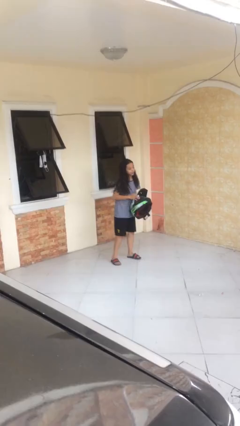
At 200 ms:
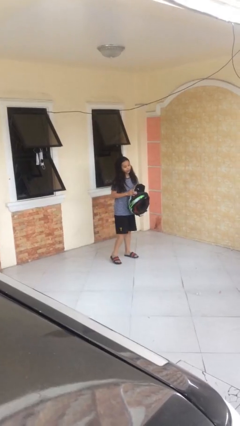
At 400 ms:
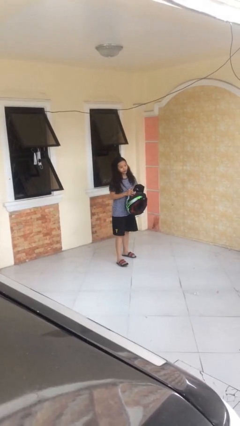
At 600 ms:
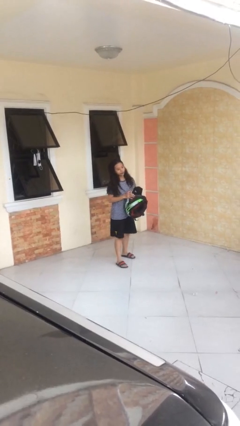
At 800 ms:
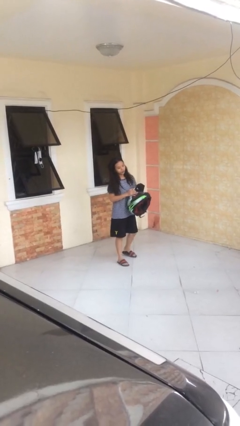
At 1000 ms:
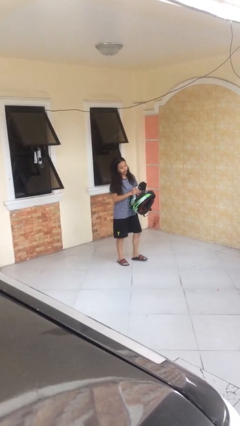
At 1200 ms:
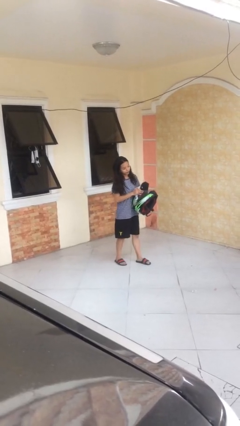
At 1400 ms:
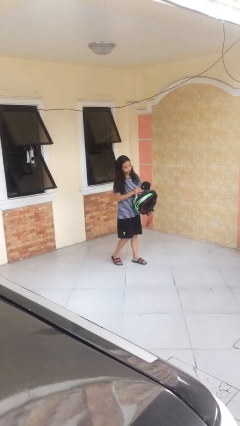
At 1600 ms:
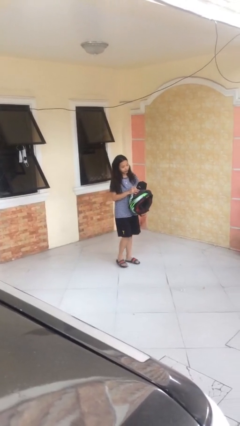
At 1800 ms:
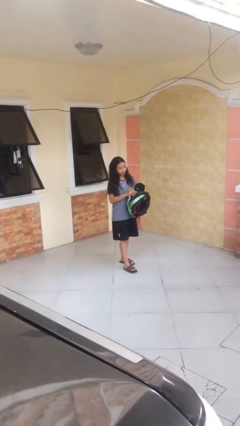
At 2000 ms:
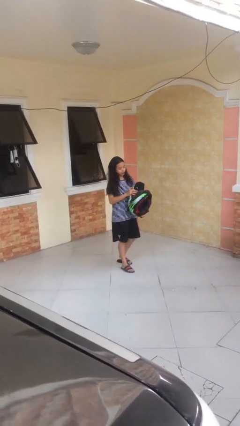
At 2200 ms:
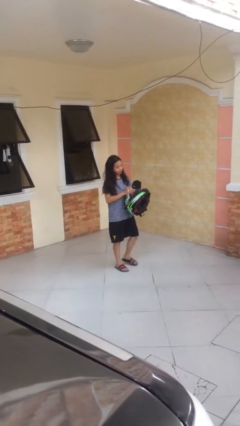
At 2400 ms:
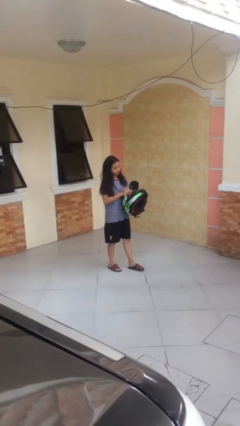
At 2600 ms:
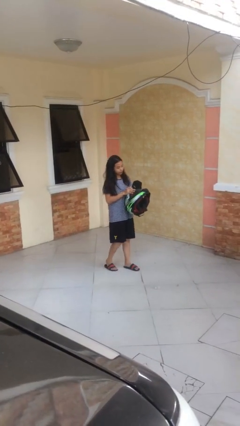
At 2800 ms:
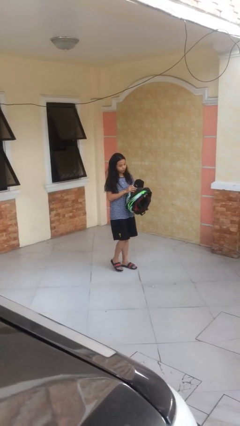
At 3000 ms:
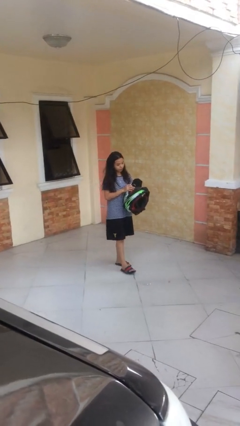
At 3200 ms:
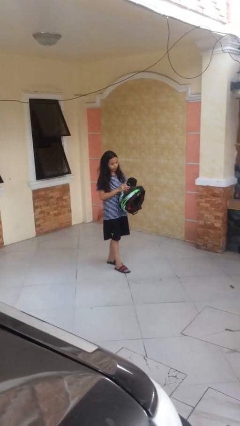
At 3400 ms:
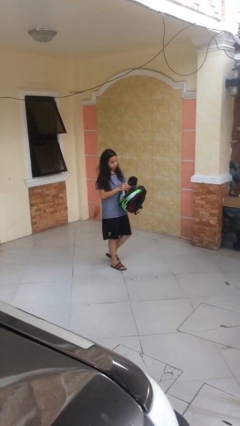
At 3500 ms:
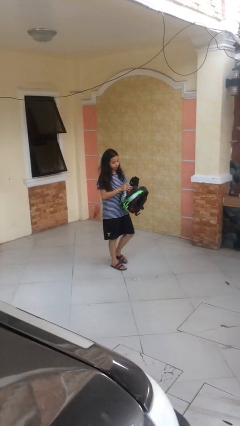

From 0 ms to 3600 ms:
person carries heavy object

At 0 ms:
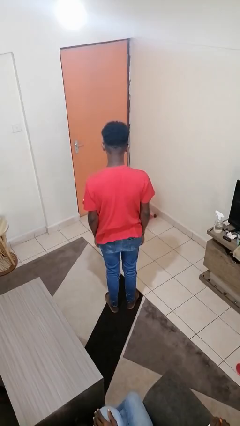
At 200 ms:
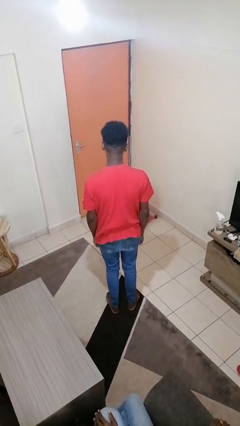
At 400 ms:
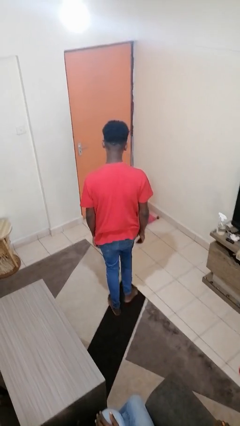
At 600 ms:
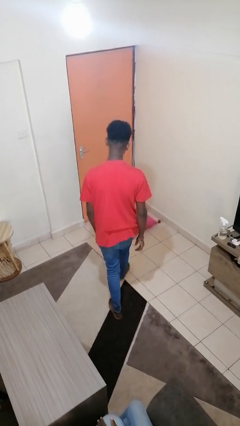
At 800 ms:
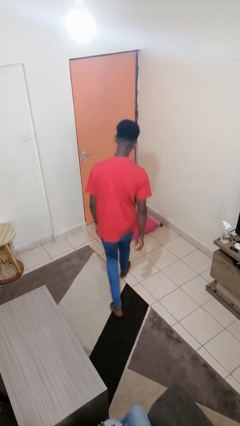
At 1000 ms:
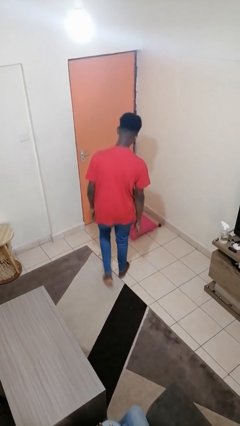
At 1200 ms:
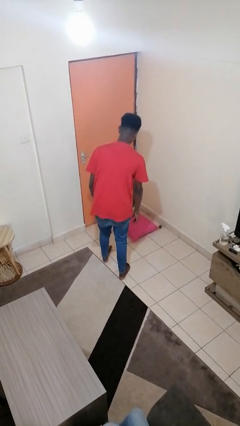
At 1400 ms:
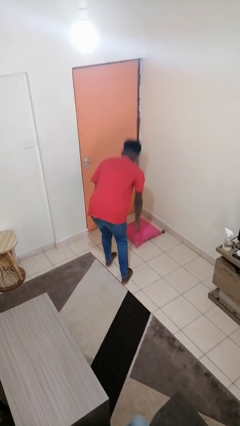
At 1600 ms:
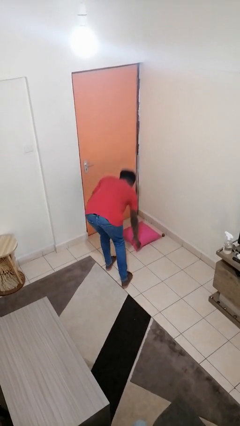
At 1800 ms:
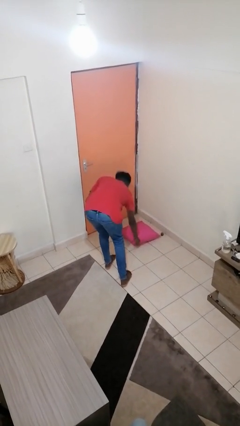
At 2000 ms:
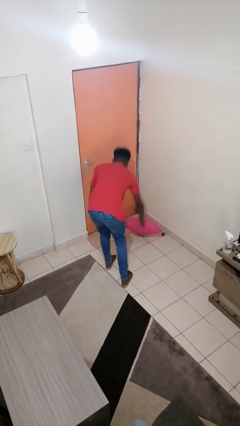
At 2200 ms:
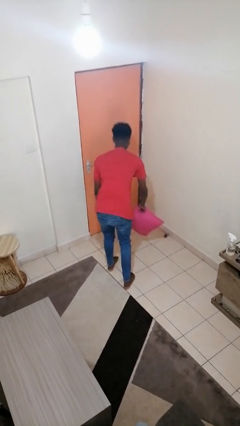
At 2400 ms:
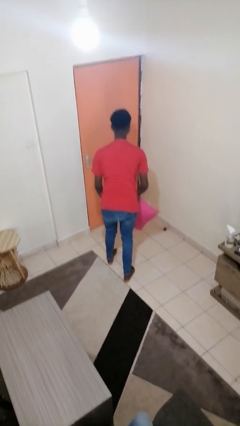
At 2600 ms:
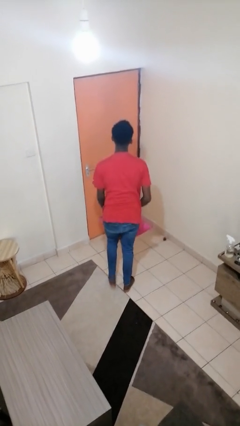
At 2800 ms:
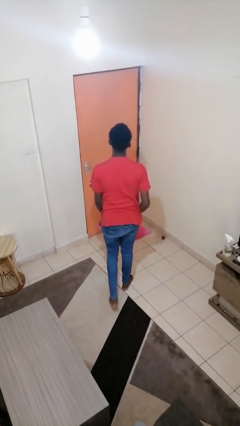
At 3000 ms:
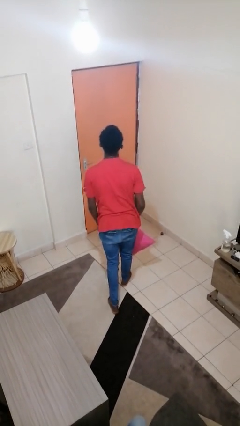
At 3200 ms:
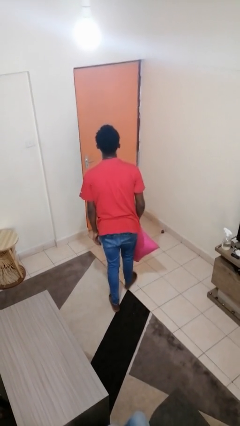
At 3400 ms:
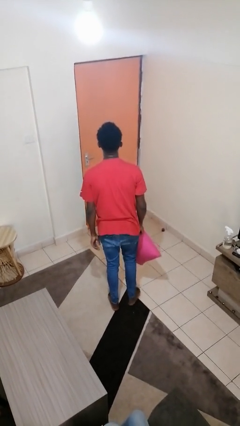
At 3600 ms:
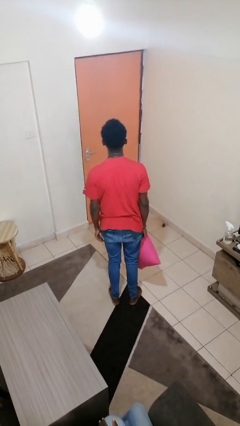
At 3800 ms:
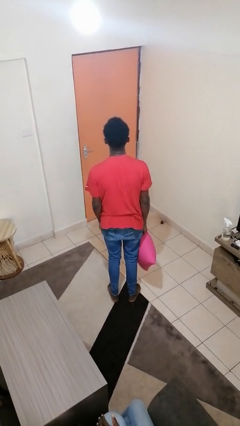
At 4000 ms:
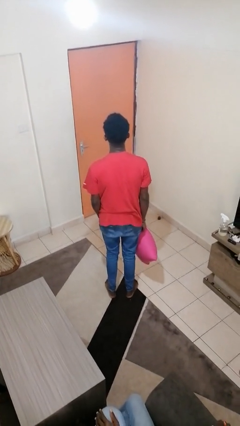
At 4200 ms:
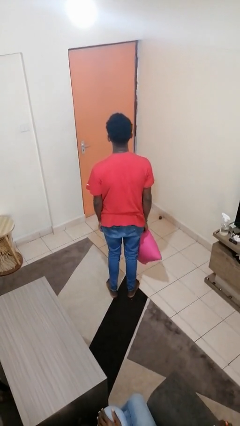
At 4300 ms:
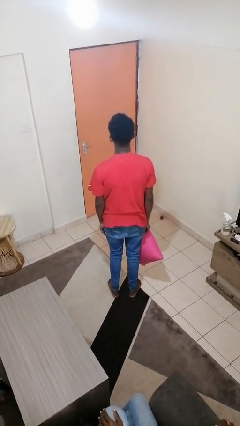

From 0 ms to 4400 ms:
person picks up object from floor

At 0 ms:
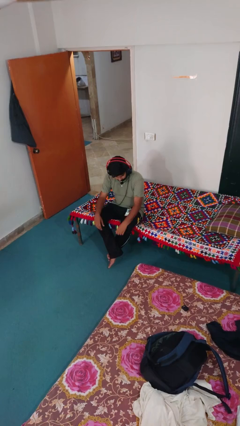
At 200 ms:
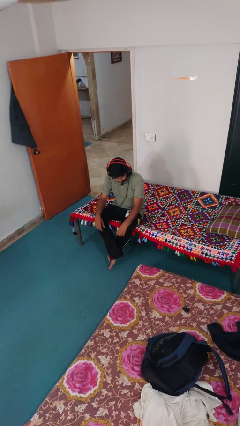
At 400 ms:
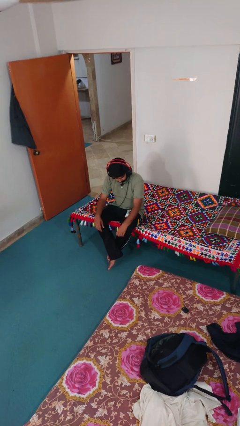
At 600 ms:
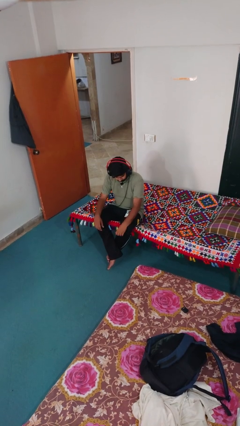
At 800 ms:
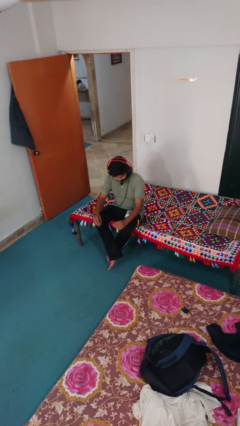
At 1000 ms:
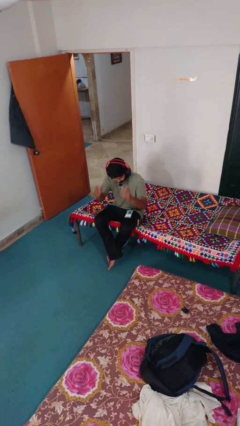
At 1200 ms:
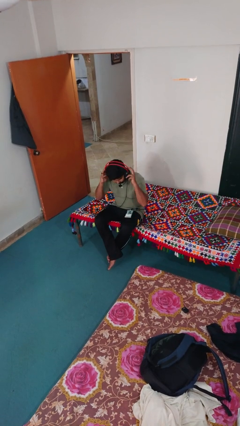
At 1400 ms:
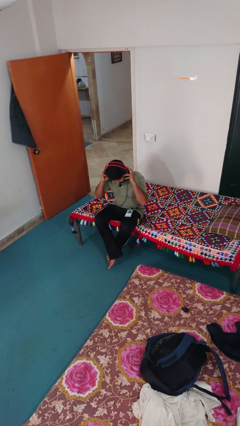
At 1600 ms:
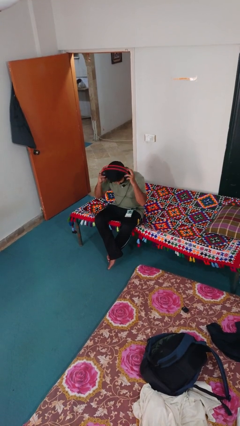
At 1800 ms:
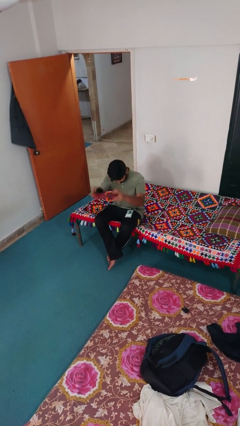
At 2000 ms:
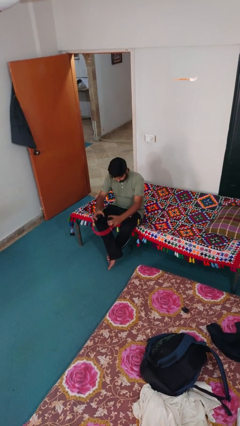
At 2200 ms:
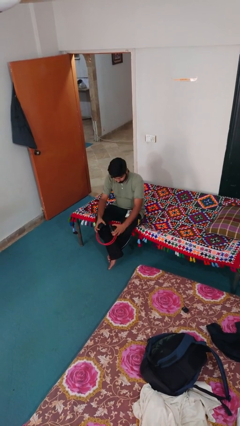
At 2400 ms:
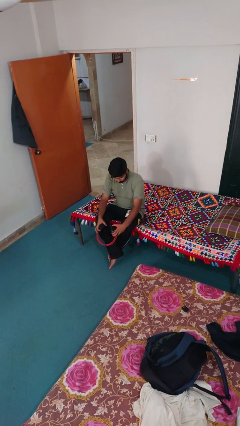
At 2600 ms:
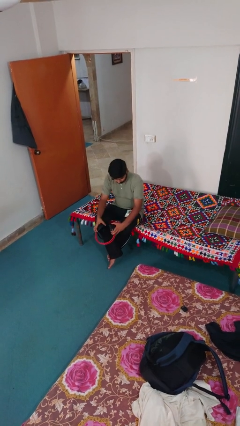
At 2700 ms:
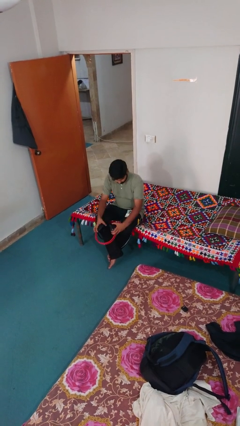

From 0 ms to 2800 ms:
person takes off headphones

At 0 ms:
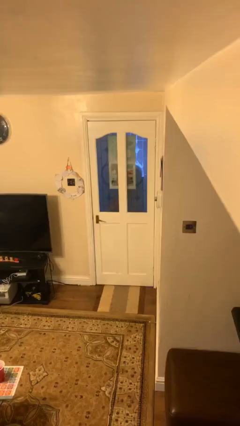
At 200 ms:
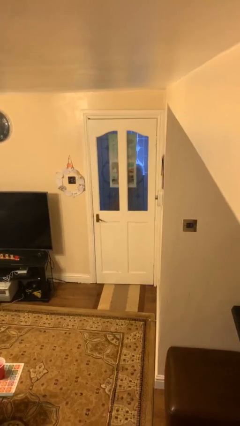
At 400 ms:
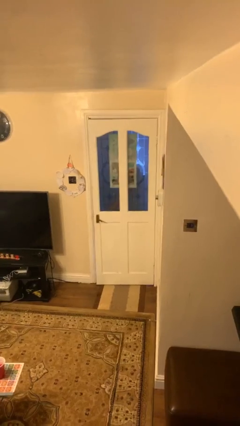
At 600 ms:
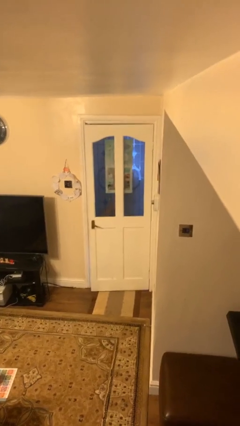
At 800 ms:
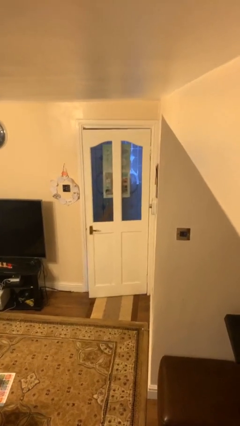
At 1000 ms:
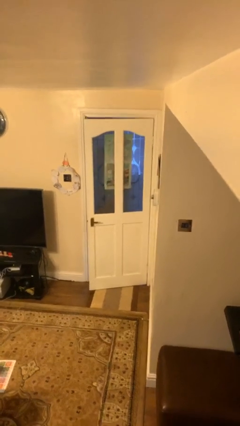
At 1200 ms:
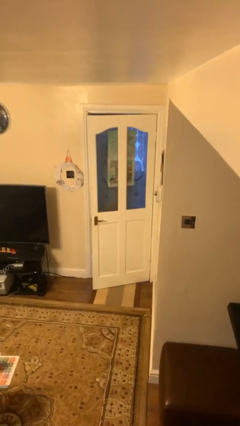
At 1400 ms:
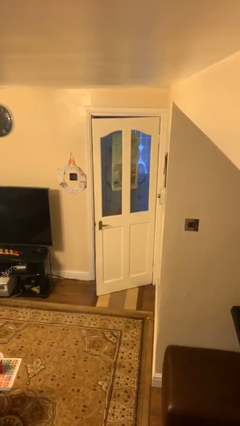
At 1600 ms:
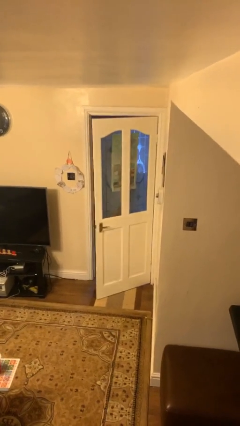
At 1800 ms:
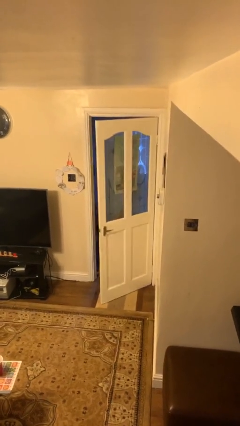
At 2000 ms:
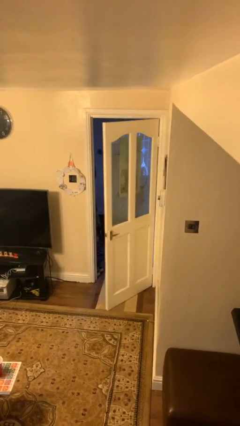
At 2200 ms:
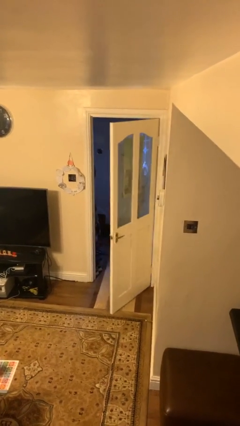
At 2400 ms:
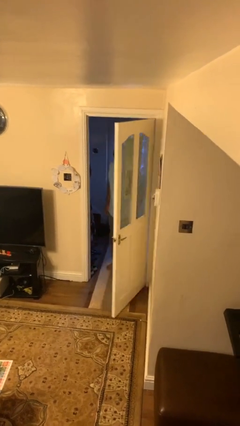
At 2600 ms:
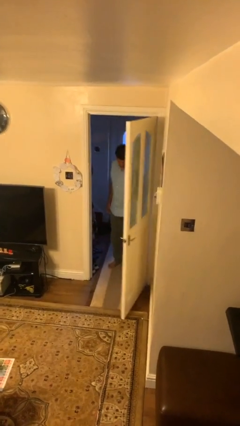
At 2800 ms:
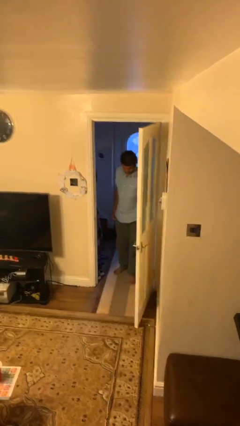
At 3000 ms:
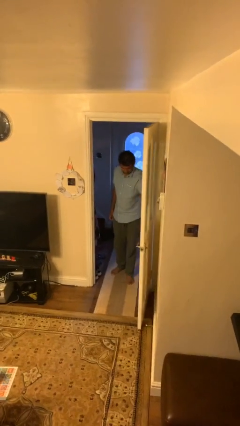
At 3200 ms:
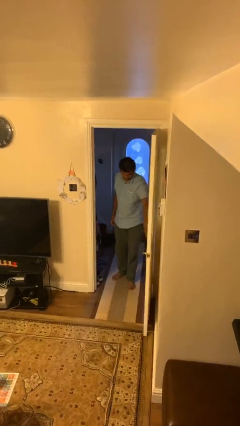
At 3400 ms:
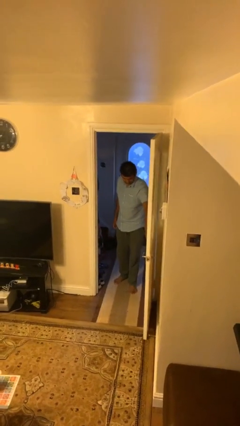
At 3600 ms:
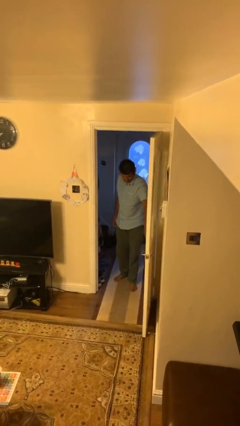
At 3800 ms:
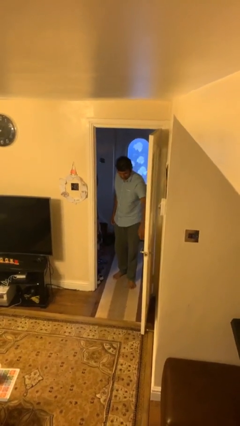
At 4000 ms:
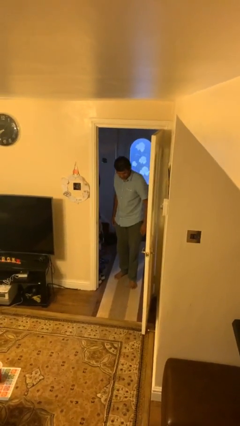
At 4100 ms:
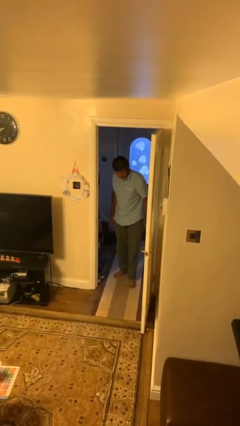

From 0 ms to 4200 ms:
person opens facility door

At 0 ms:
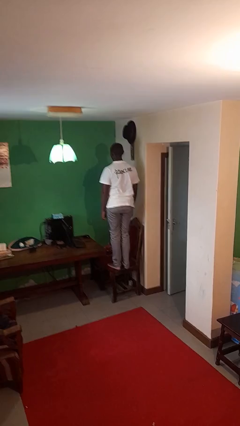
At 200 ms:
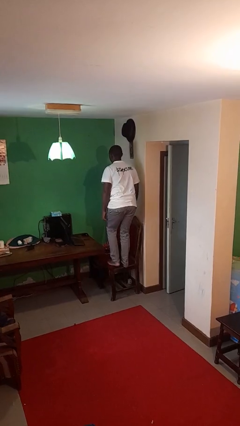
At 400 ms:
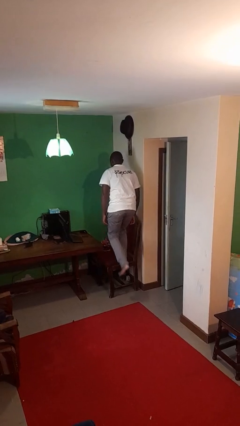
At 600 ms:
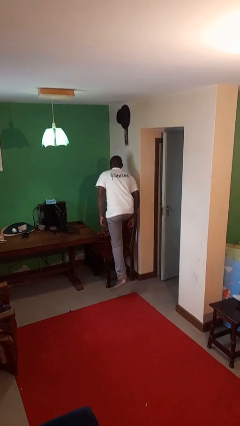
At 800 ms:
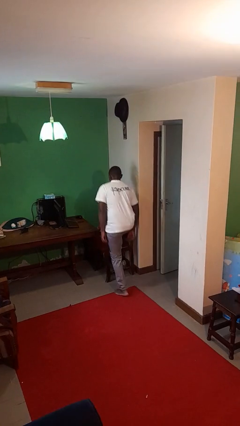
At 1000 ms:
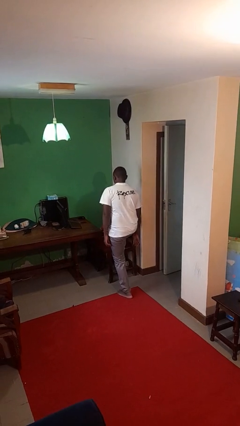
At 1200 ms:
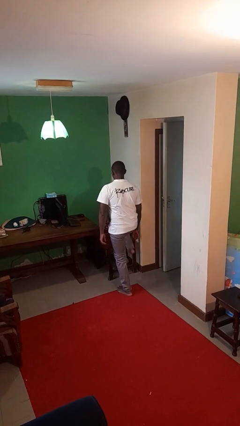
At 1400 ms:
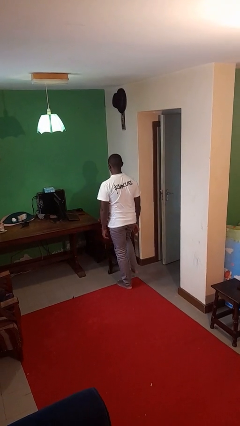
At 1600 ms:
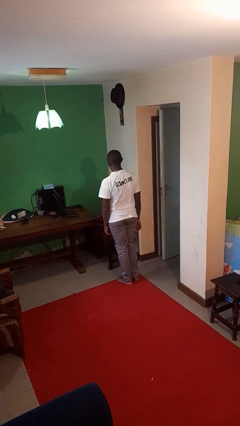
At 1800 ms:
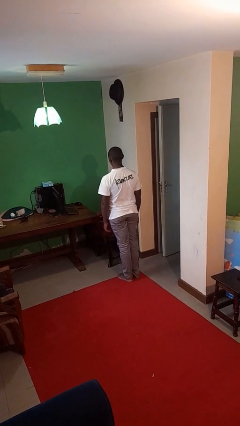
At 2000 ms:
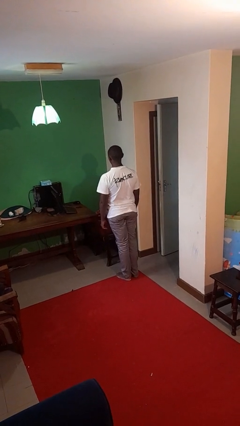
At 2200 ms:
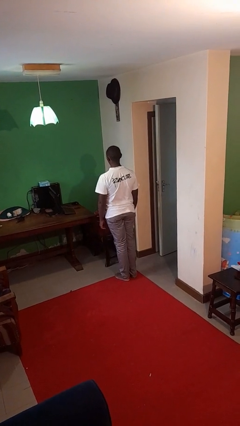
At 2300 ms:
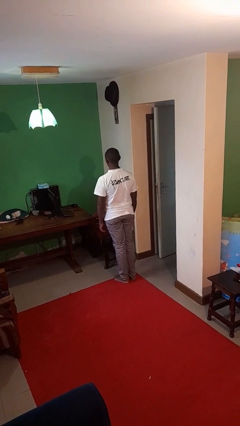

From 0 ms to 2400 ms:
person climbs off chair

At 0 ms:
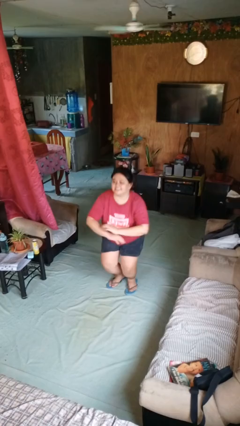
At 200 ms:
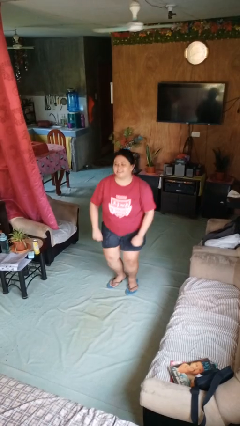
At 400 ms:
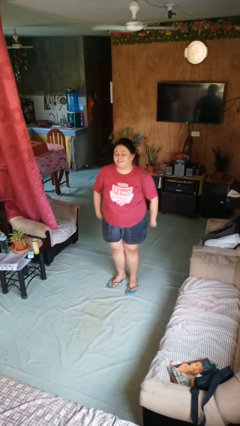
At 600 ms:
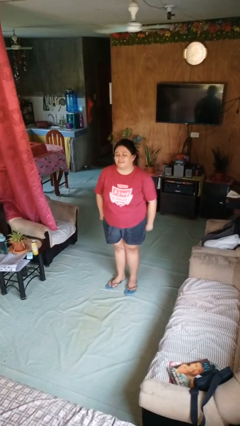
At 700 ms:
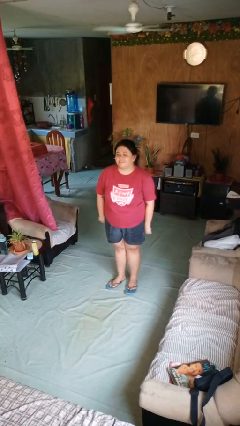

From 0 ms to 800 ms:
person stands up
